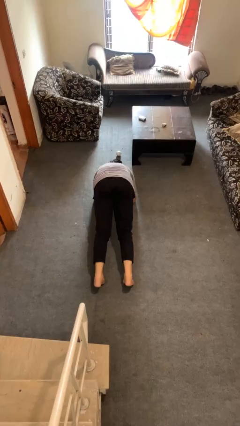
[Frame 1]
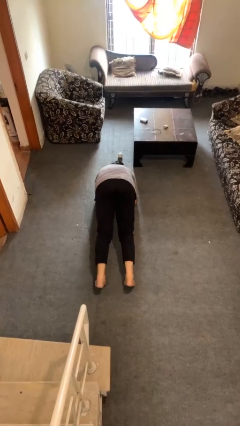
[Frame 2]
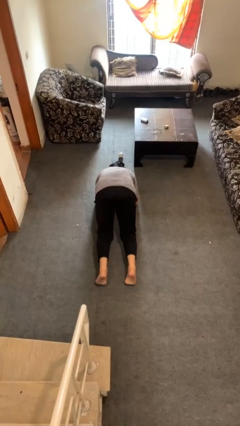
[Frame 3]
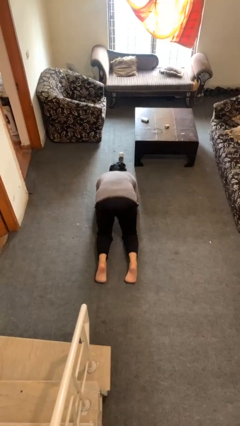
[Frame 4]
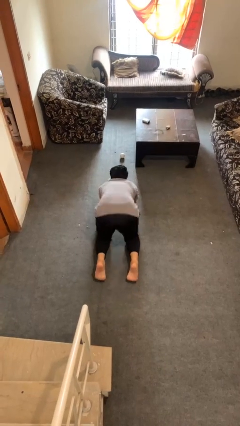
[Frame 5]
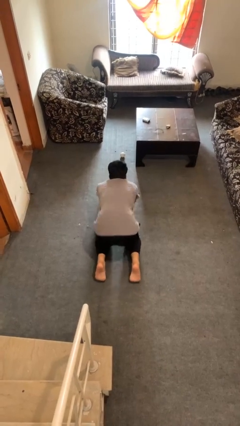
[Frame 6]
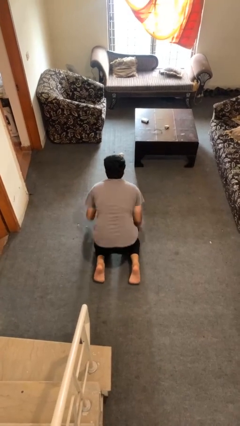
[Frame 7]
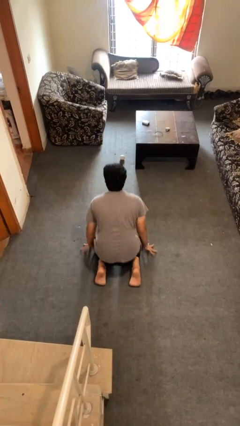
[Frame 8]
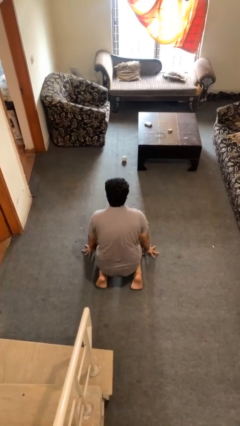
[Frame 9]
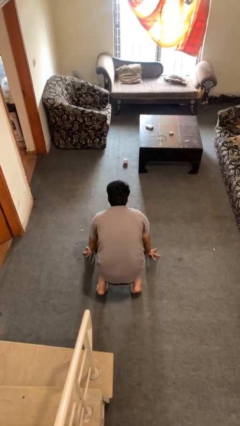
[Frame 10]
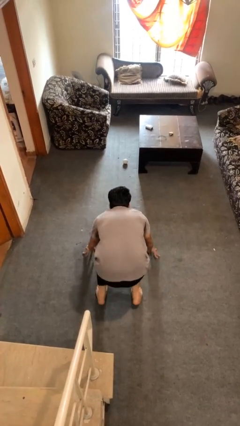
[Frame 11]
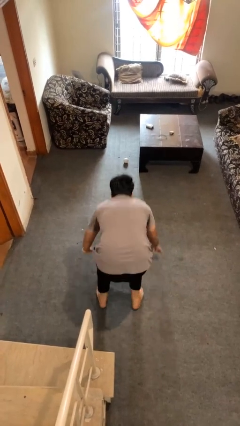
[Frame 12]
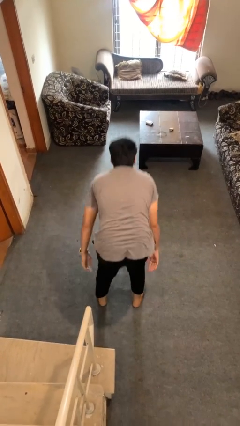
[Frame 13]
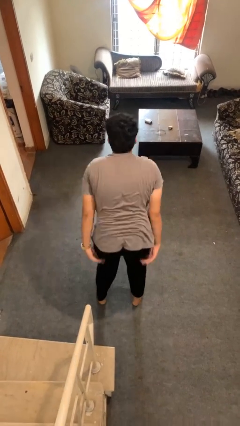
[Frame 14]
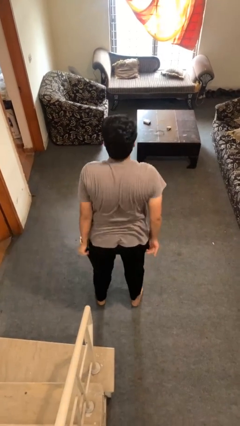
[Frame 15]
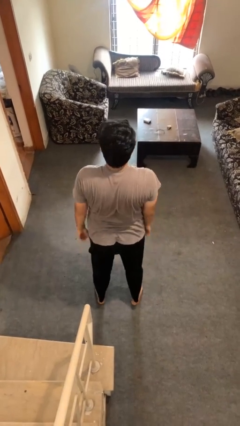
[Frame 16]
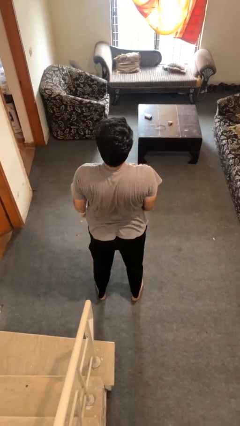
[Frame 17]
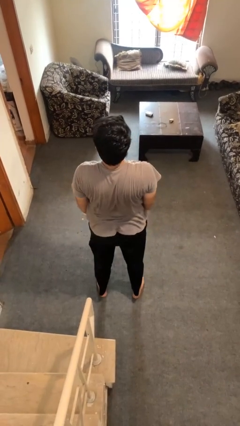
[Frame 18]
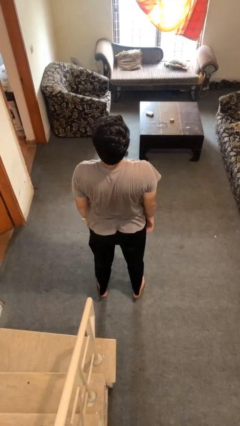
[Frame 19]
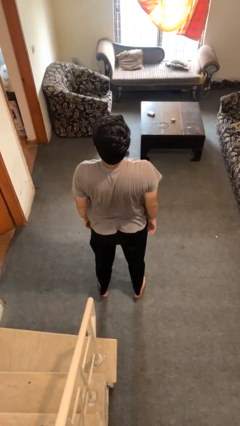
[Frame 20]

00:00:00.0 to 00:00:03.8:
person stands up from floor

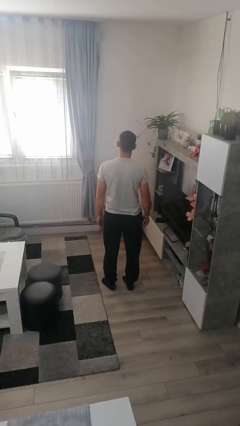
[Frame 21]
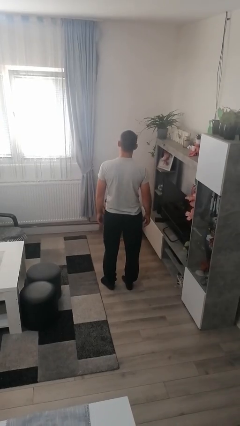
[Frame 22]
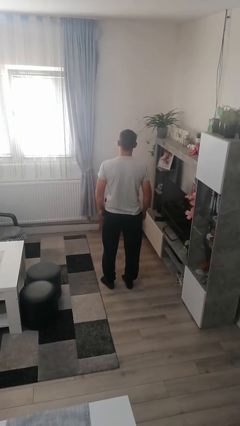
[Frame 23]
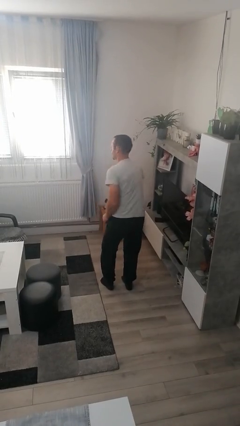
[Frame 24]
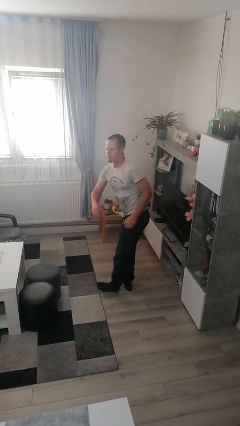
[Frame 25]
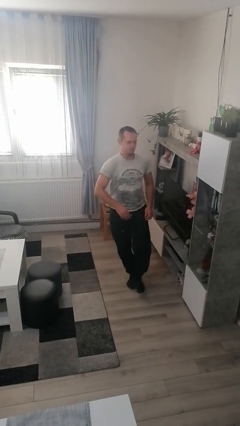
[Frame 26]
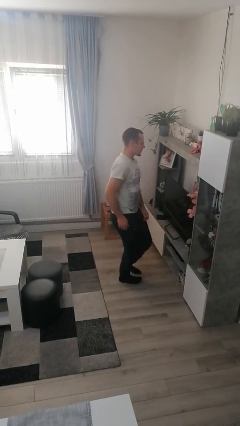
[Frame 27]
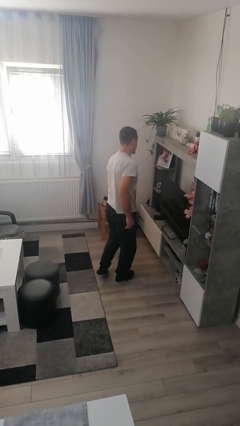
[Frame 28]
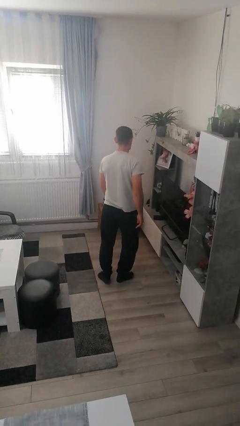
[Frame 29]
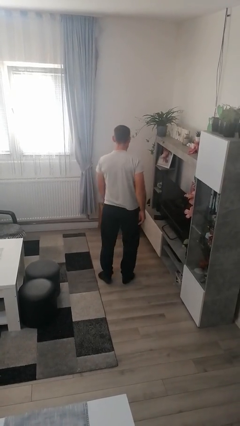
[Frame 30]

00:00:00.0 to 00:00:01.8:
person twirls

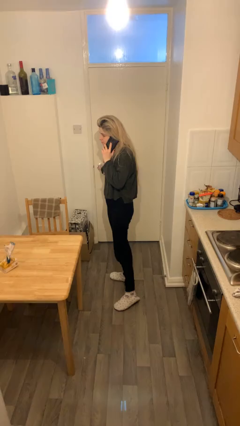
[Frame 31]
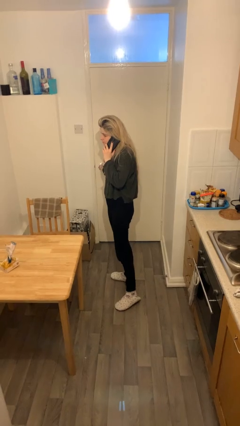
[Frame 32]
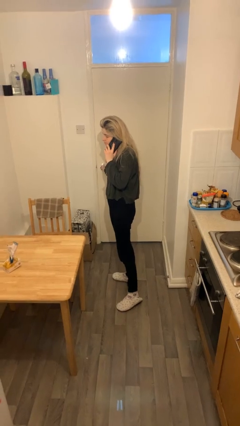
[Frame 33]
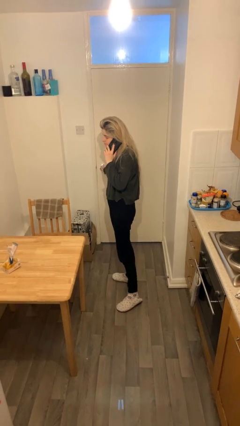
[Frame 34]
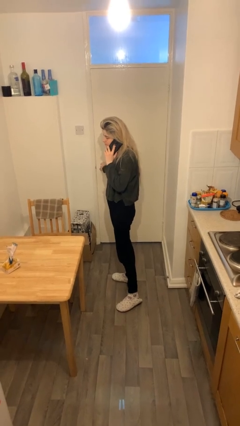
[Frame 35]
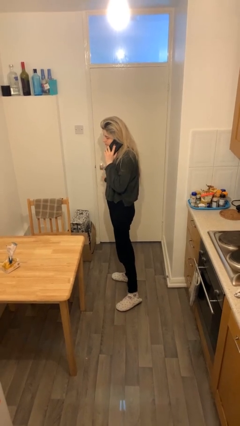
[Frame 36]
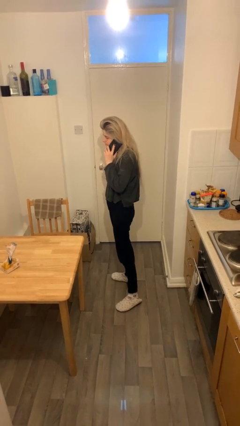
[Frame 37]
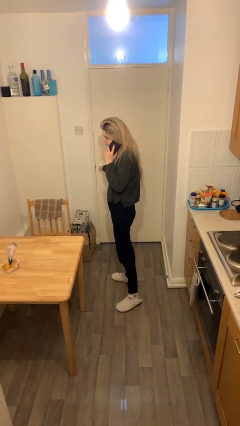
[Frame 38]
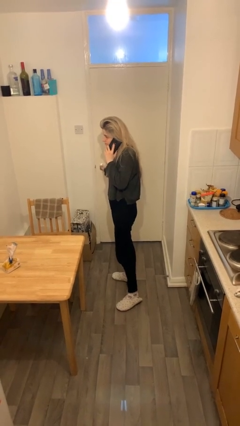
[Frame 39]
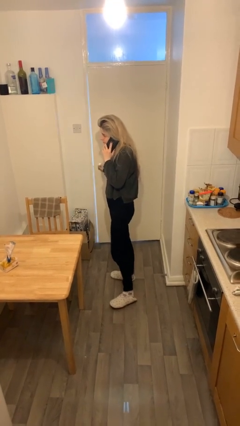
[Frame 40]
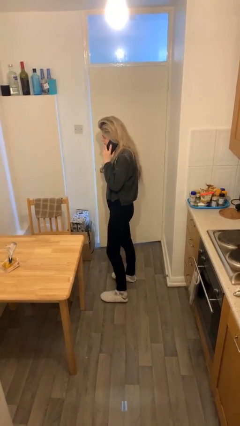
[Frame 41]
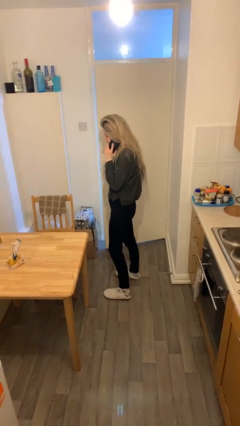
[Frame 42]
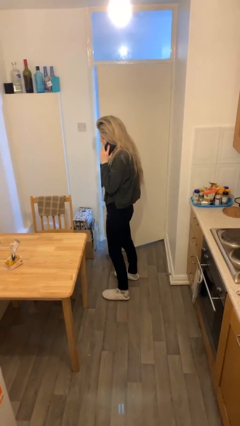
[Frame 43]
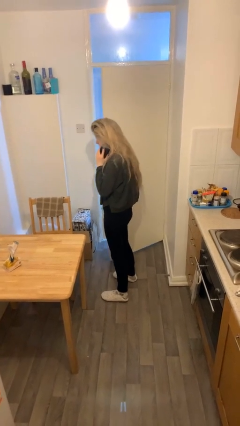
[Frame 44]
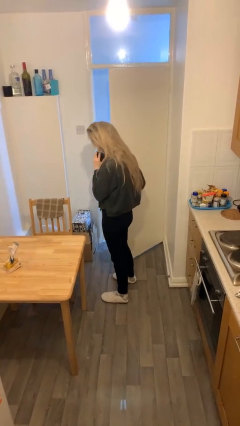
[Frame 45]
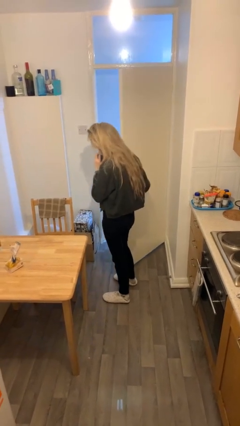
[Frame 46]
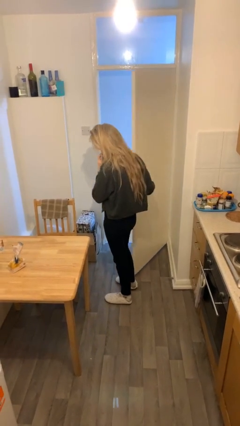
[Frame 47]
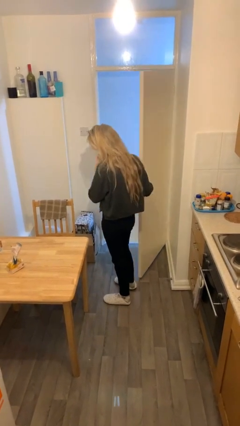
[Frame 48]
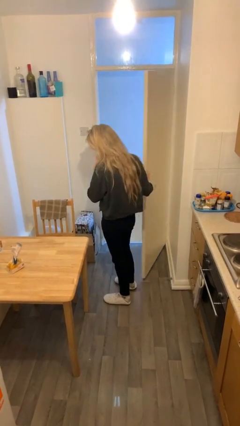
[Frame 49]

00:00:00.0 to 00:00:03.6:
person opens facility door

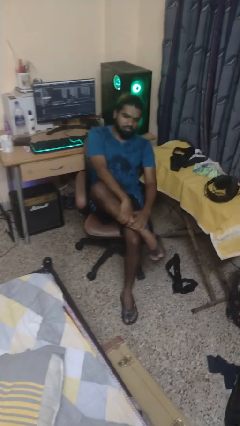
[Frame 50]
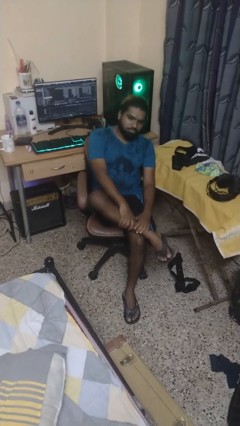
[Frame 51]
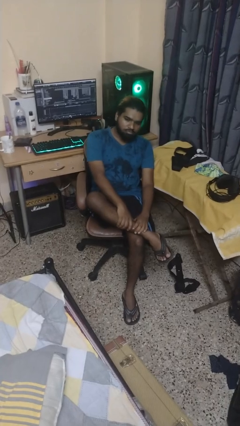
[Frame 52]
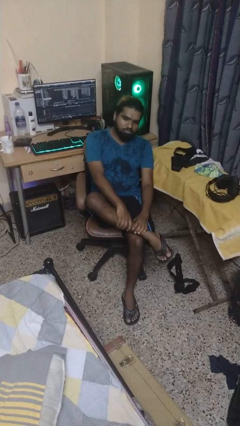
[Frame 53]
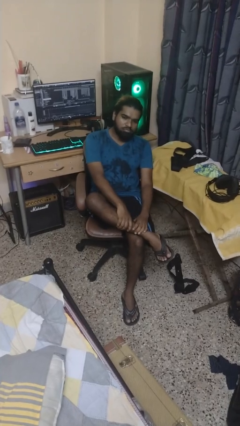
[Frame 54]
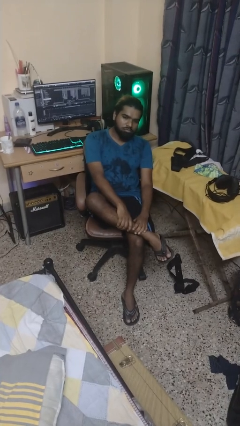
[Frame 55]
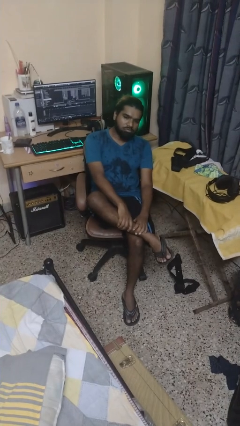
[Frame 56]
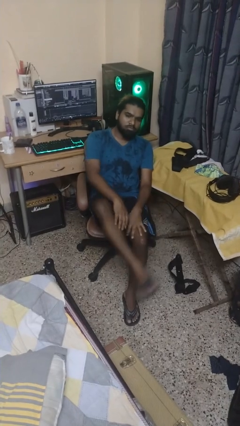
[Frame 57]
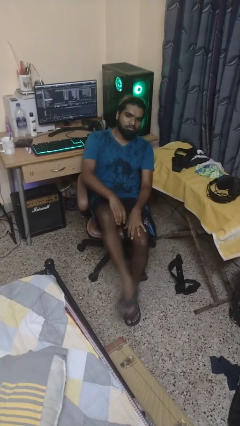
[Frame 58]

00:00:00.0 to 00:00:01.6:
person crosses legs

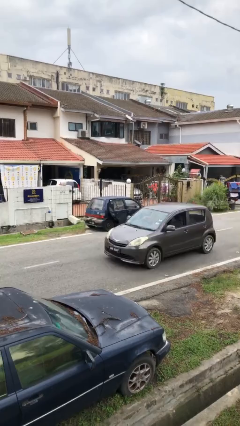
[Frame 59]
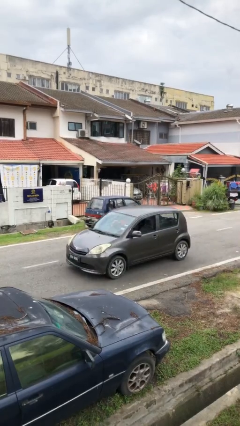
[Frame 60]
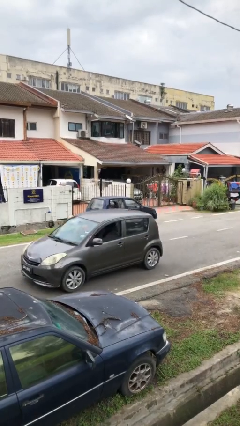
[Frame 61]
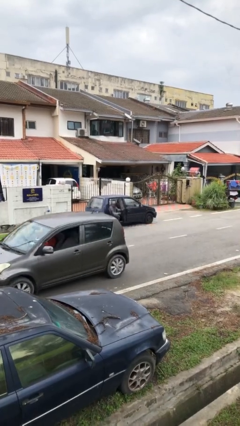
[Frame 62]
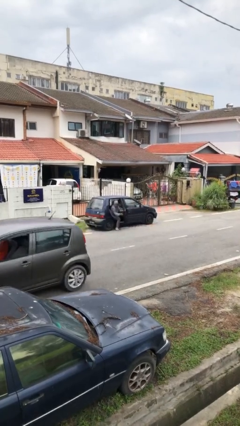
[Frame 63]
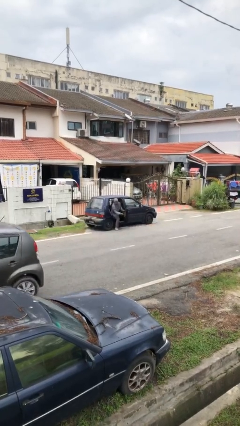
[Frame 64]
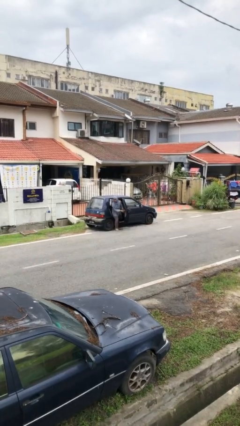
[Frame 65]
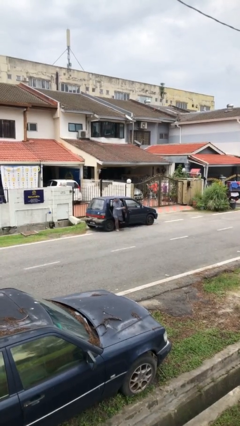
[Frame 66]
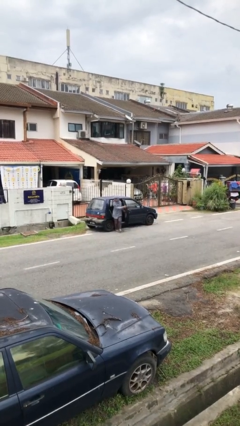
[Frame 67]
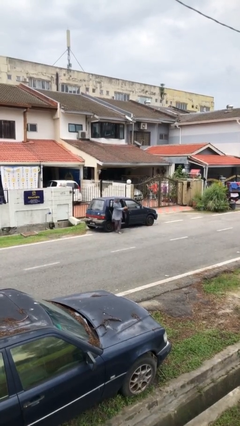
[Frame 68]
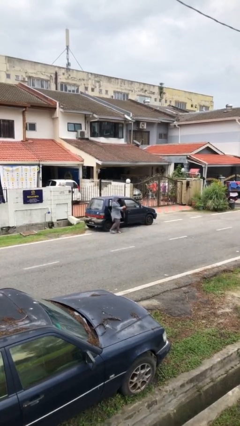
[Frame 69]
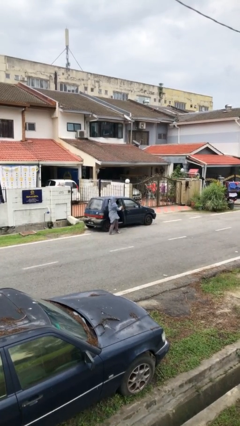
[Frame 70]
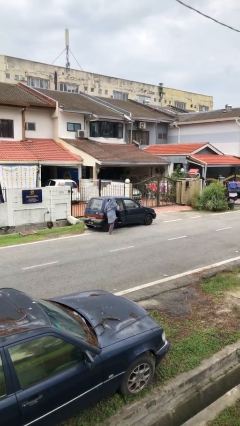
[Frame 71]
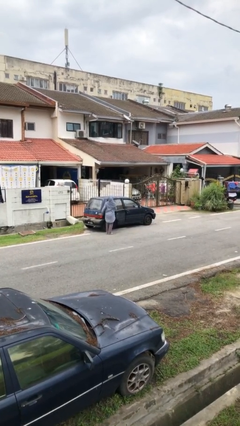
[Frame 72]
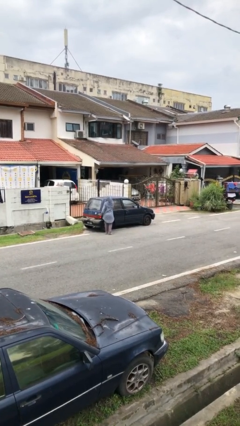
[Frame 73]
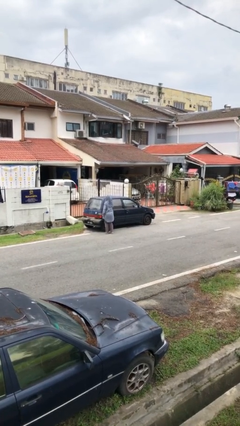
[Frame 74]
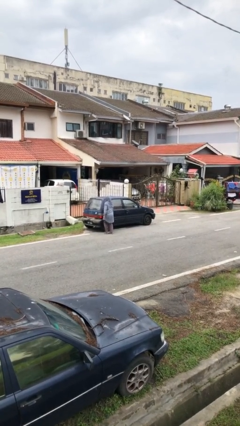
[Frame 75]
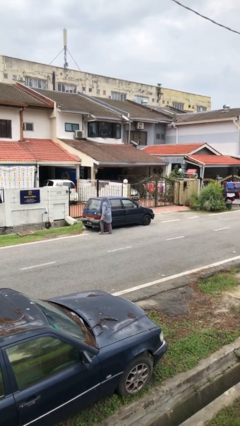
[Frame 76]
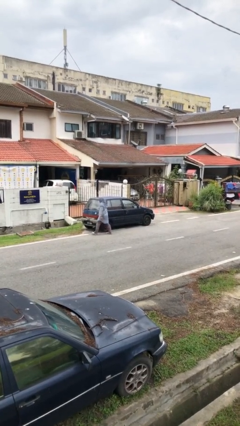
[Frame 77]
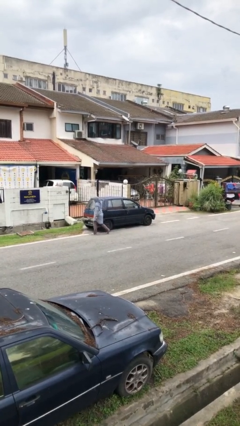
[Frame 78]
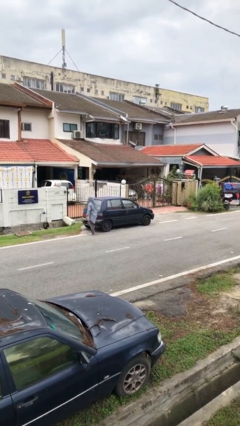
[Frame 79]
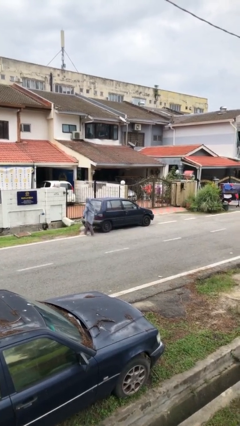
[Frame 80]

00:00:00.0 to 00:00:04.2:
car drops off person

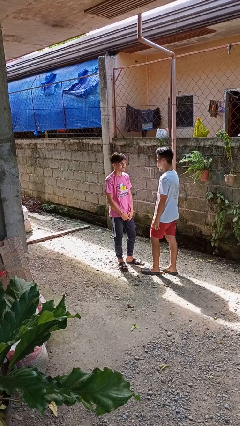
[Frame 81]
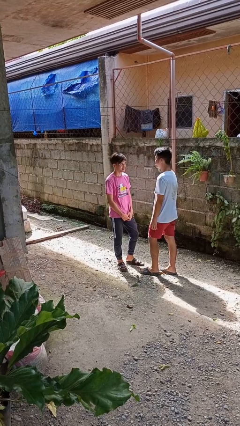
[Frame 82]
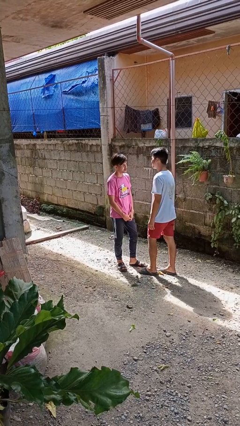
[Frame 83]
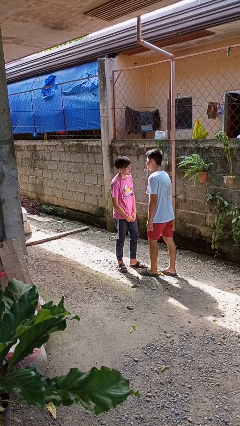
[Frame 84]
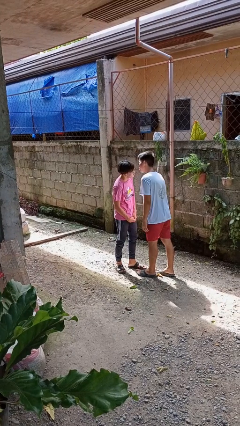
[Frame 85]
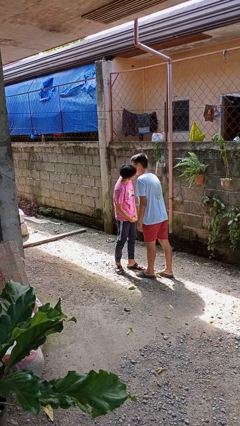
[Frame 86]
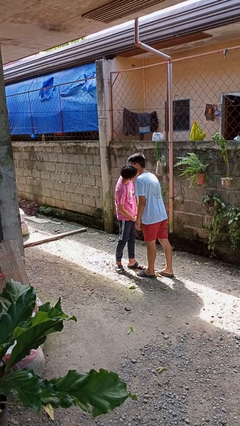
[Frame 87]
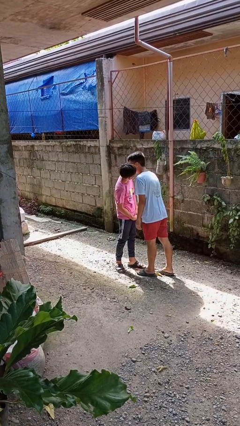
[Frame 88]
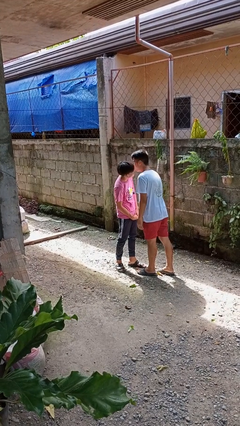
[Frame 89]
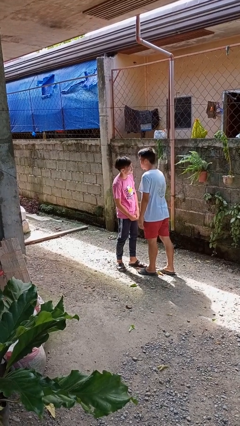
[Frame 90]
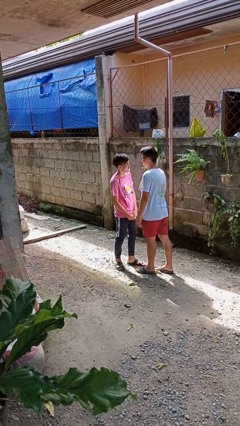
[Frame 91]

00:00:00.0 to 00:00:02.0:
person kisses cheek of person
